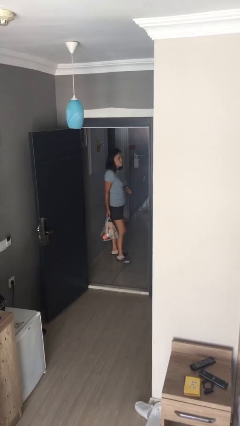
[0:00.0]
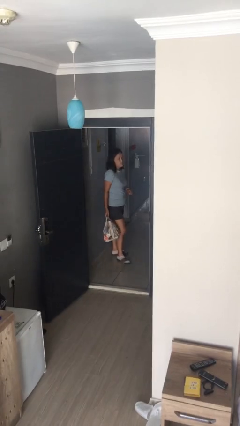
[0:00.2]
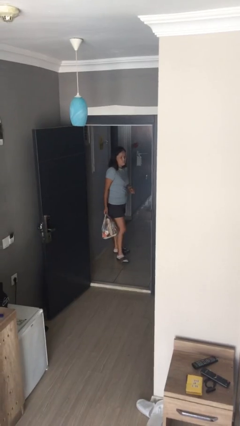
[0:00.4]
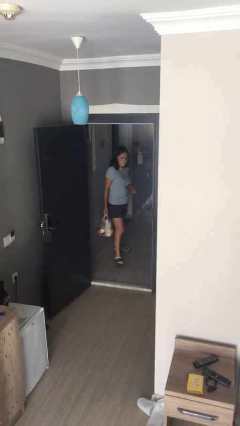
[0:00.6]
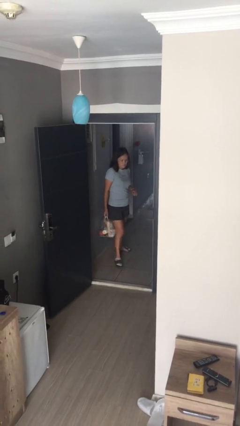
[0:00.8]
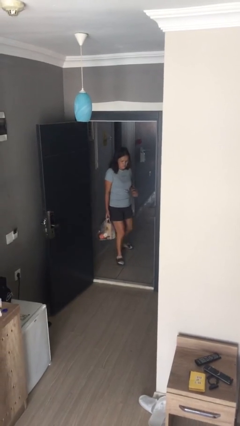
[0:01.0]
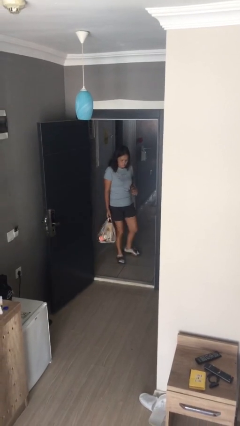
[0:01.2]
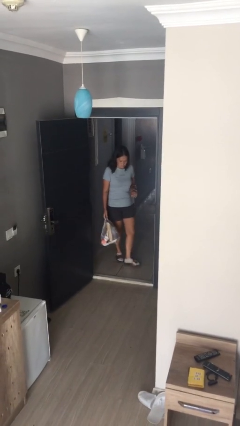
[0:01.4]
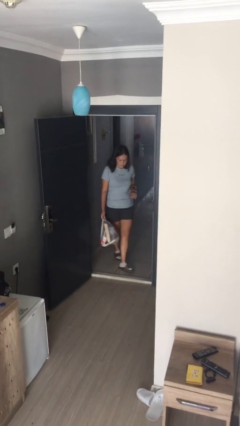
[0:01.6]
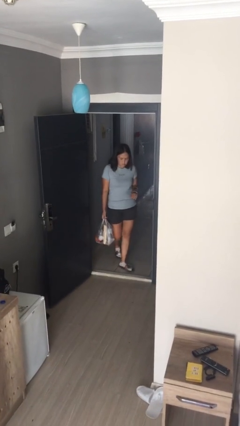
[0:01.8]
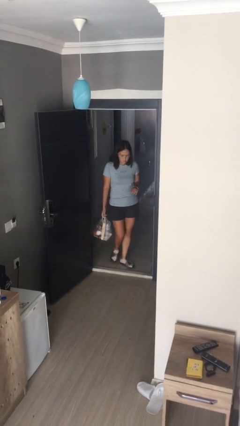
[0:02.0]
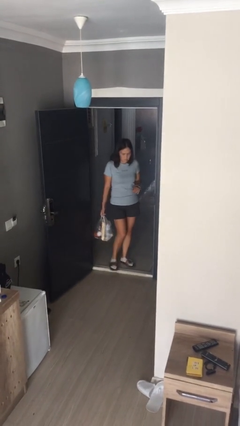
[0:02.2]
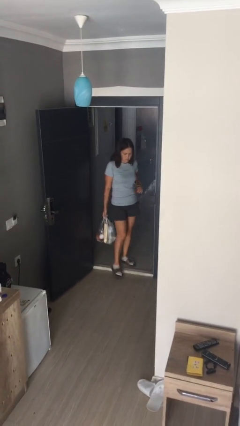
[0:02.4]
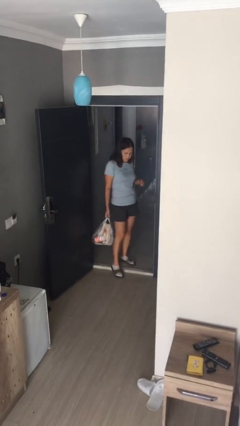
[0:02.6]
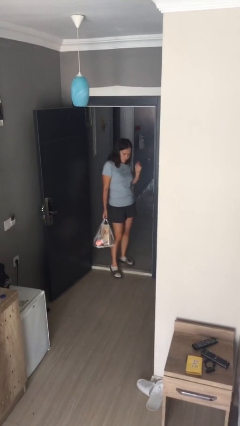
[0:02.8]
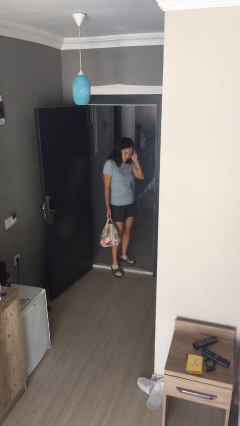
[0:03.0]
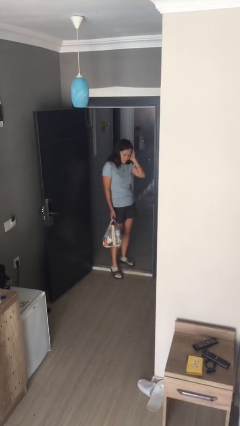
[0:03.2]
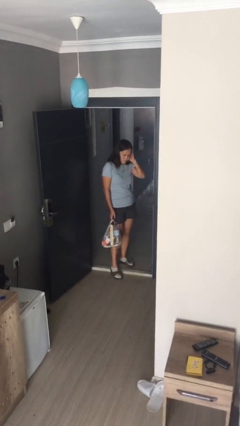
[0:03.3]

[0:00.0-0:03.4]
person carries groceries

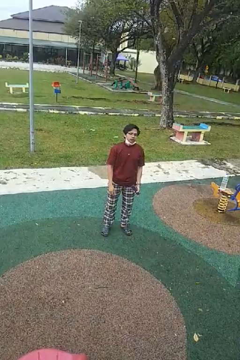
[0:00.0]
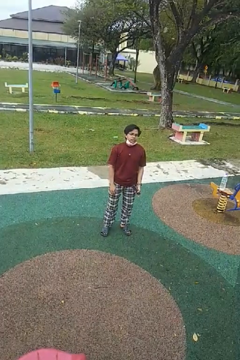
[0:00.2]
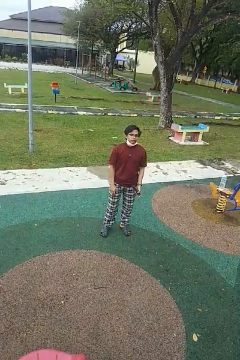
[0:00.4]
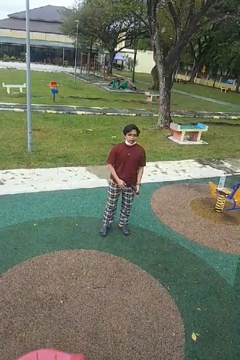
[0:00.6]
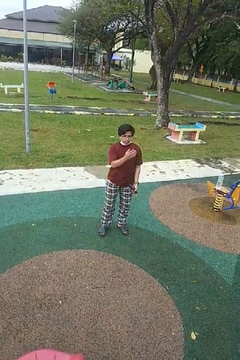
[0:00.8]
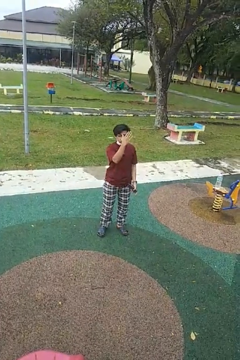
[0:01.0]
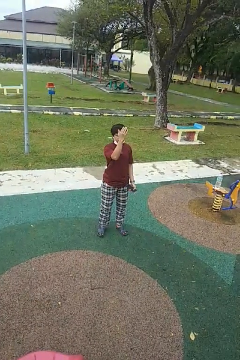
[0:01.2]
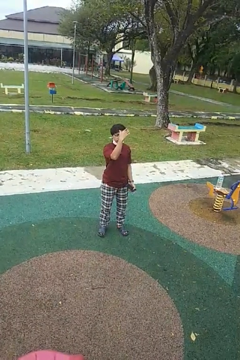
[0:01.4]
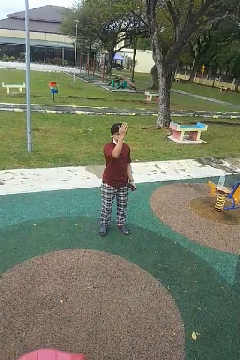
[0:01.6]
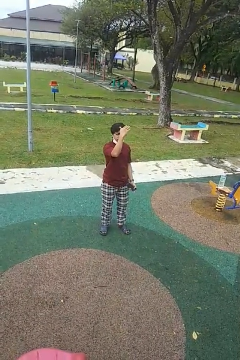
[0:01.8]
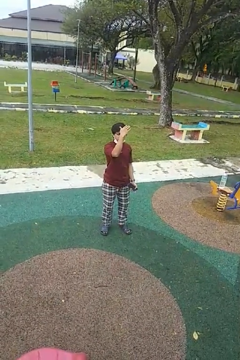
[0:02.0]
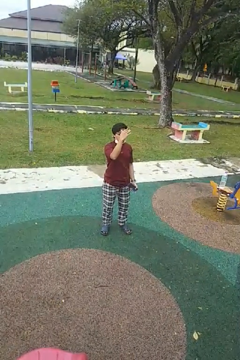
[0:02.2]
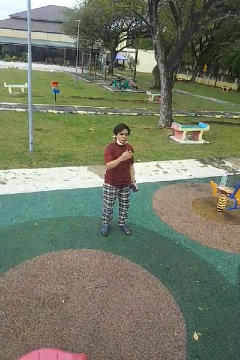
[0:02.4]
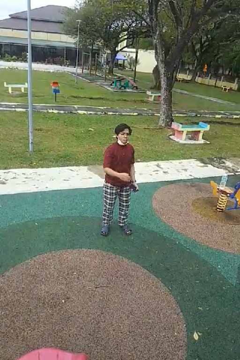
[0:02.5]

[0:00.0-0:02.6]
person gestures come here

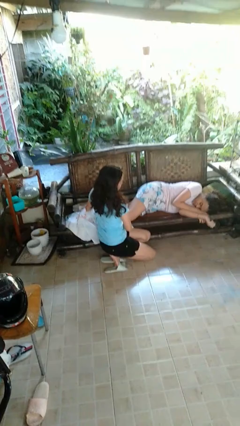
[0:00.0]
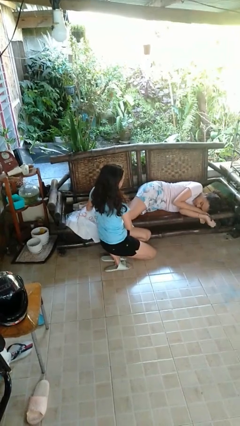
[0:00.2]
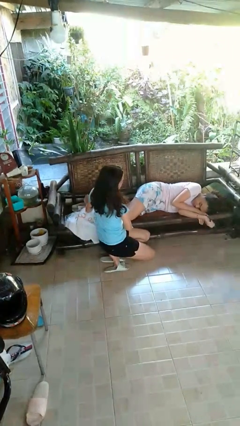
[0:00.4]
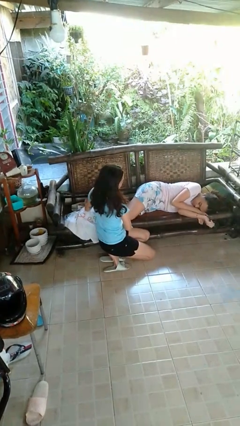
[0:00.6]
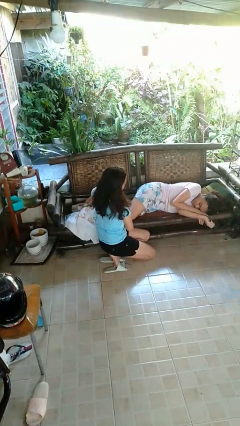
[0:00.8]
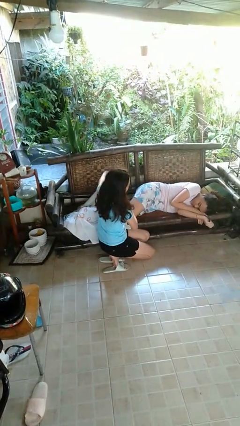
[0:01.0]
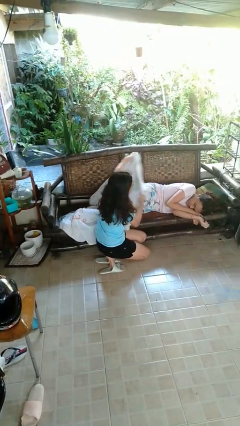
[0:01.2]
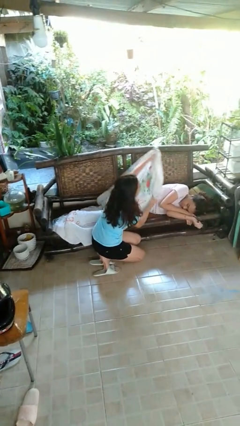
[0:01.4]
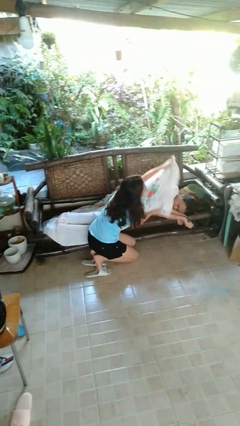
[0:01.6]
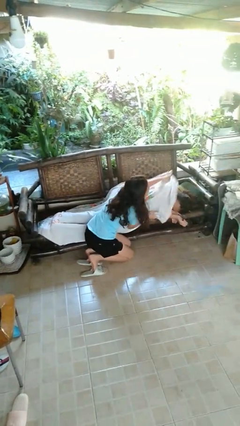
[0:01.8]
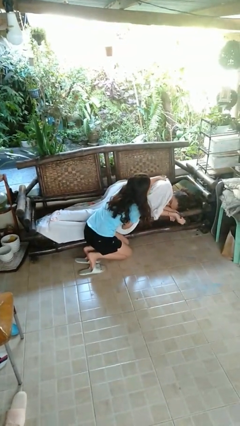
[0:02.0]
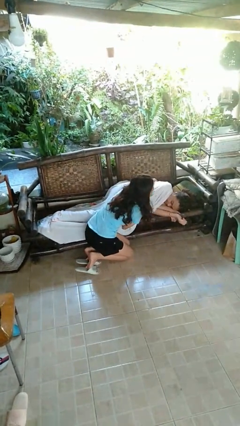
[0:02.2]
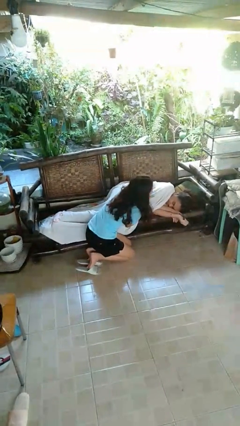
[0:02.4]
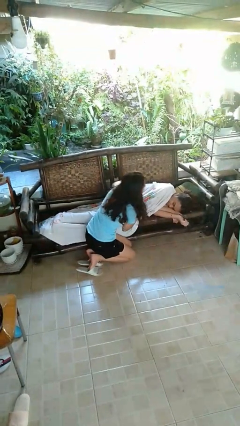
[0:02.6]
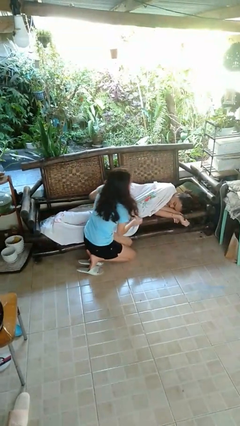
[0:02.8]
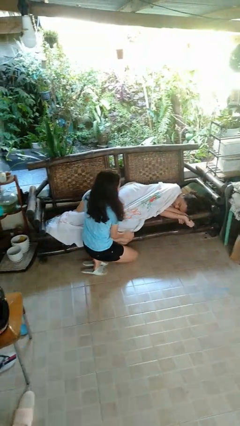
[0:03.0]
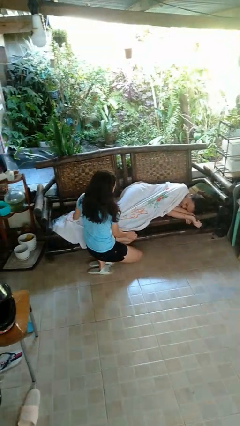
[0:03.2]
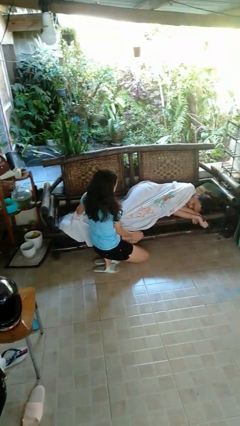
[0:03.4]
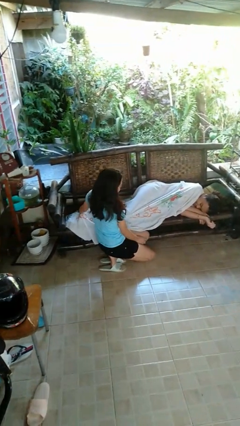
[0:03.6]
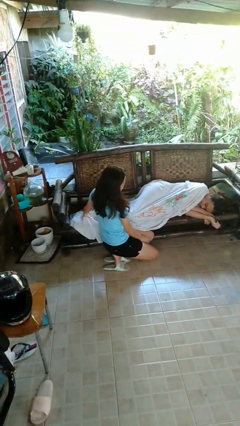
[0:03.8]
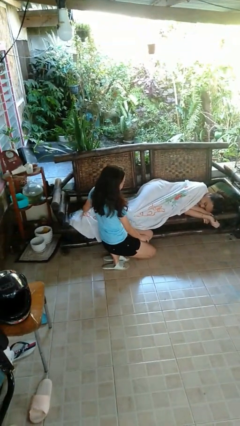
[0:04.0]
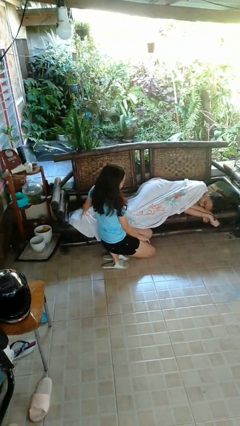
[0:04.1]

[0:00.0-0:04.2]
person covers friend with blanket

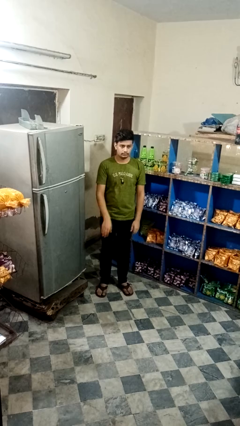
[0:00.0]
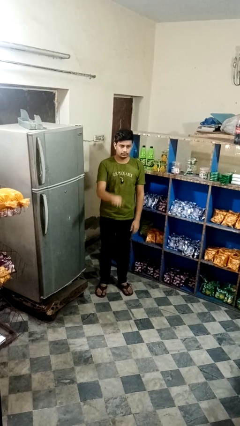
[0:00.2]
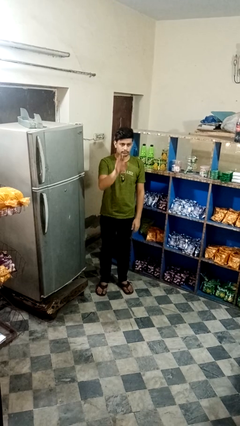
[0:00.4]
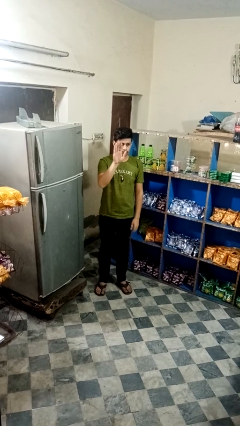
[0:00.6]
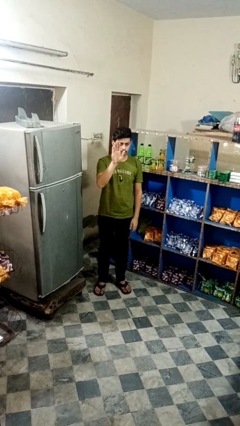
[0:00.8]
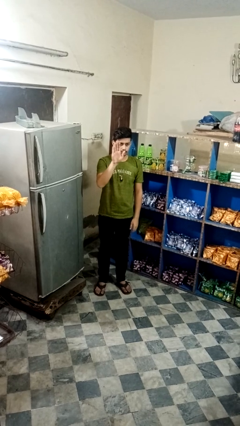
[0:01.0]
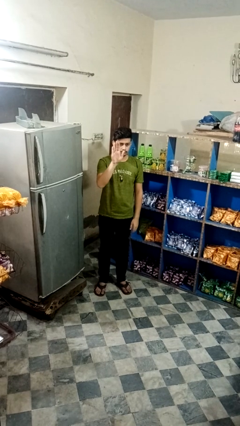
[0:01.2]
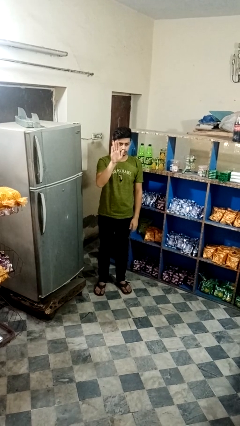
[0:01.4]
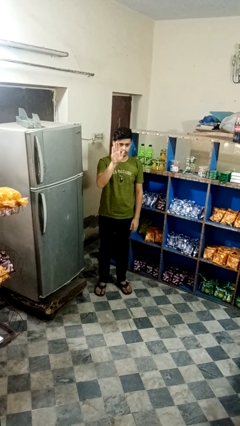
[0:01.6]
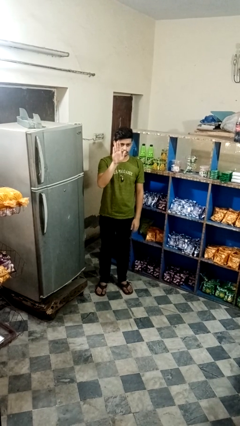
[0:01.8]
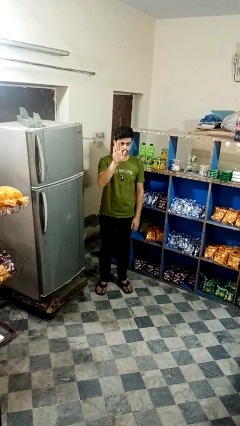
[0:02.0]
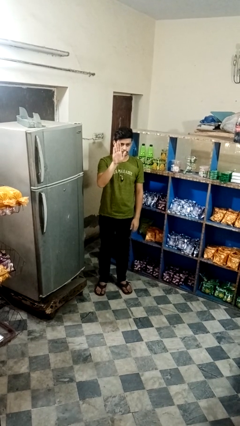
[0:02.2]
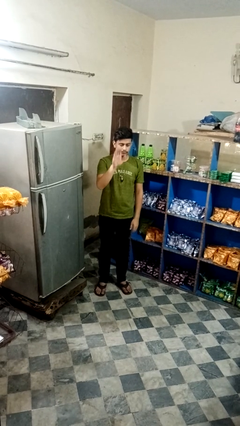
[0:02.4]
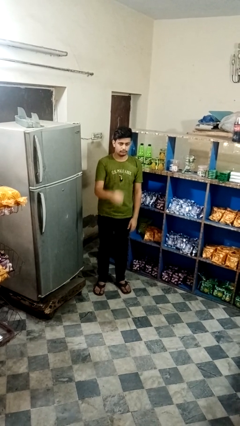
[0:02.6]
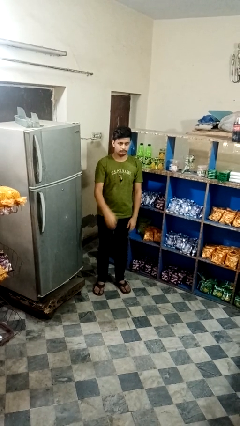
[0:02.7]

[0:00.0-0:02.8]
person gestures stop

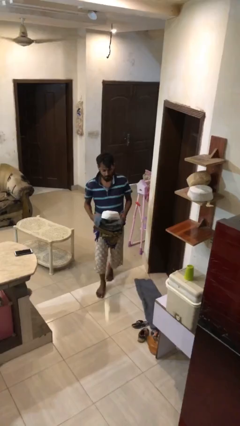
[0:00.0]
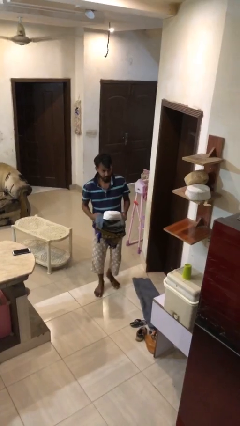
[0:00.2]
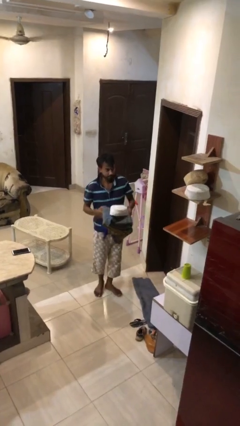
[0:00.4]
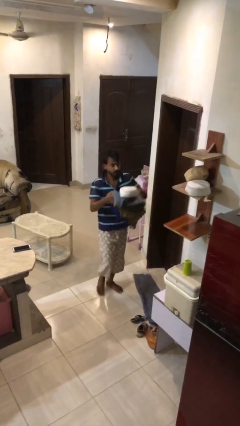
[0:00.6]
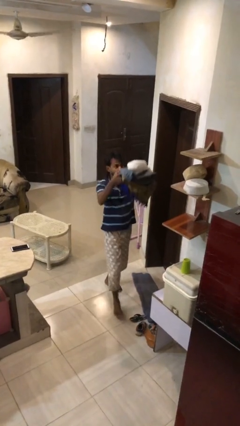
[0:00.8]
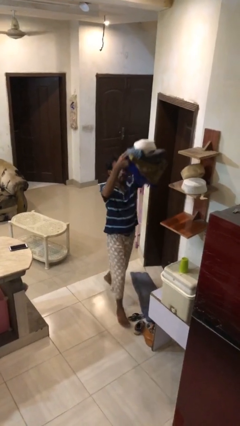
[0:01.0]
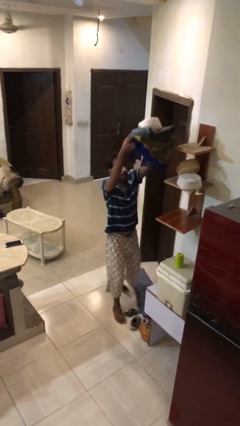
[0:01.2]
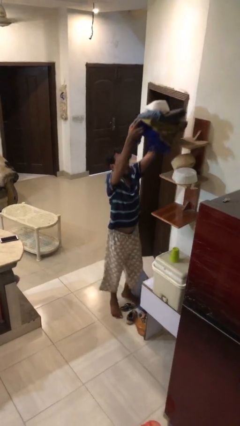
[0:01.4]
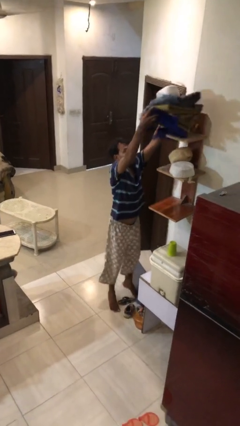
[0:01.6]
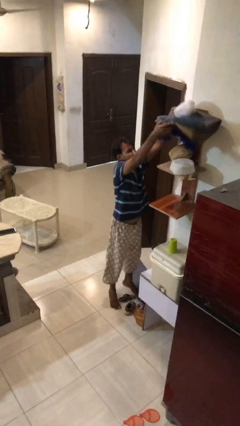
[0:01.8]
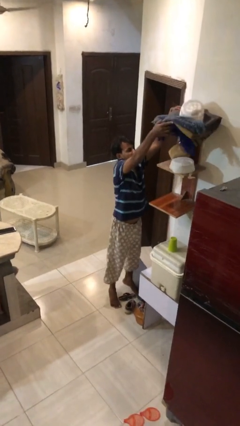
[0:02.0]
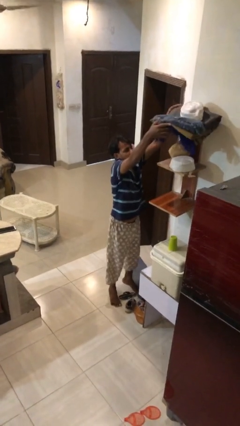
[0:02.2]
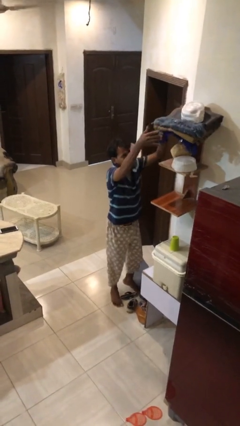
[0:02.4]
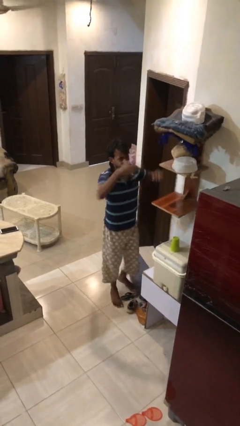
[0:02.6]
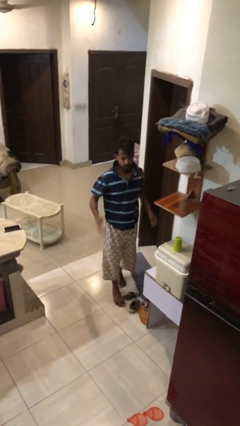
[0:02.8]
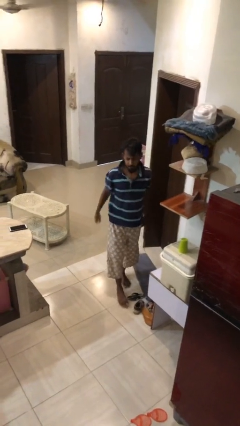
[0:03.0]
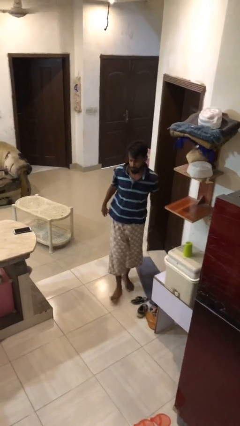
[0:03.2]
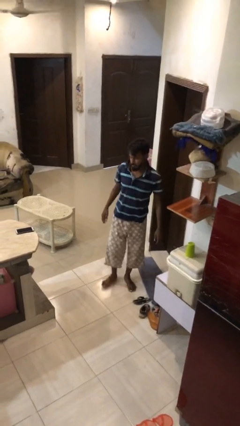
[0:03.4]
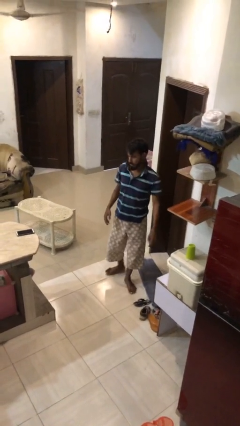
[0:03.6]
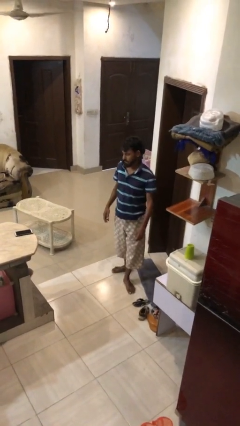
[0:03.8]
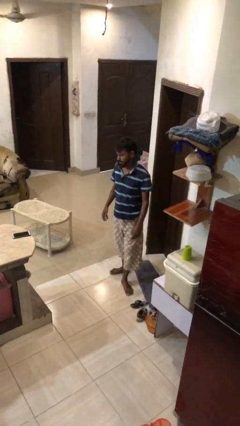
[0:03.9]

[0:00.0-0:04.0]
person puts down object on shelf
